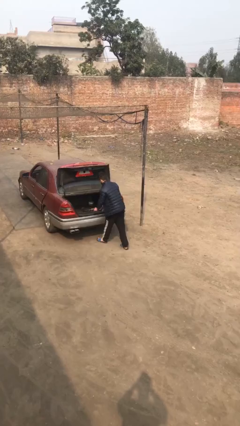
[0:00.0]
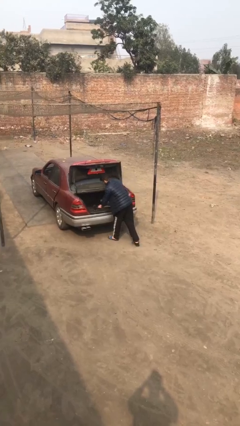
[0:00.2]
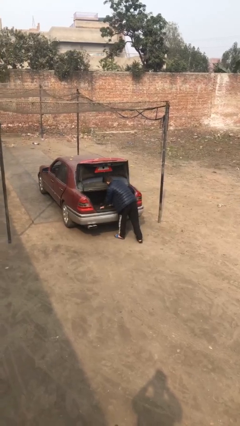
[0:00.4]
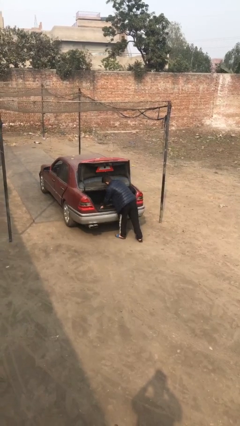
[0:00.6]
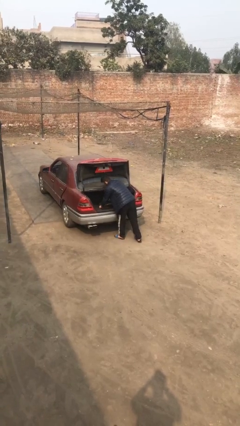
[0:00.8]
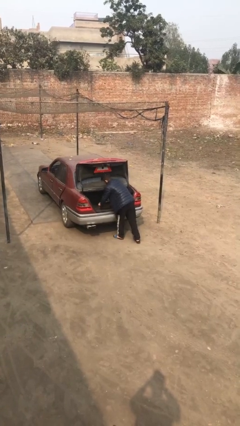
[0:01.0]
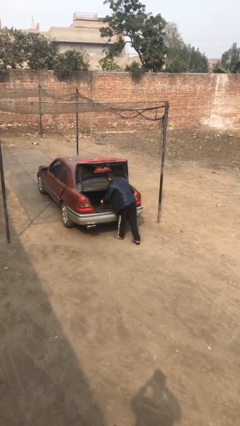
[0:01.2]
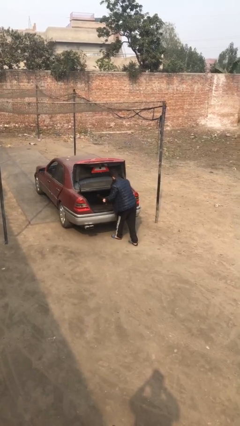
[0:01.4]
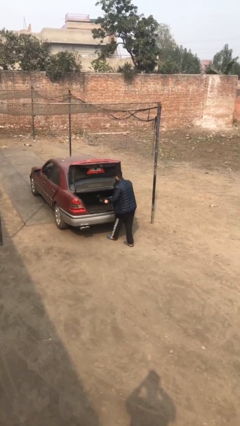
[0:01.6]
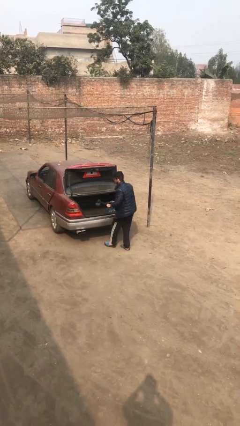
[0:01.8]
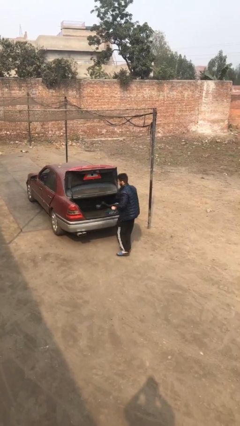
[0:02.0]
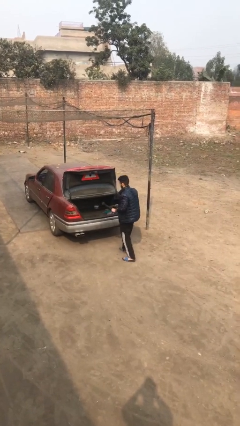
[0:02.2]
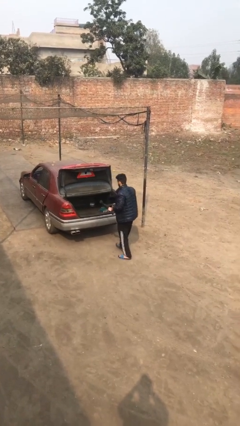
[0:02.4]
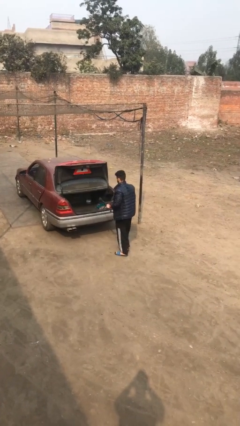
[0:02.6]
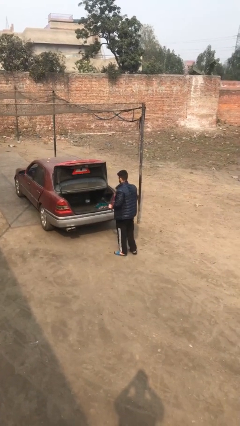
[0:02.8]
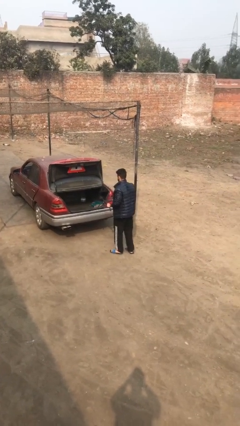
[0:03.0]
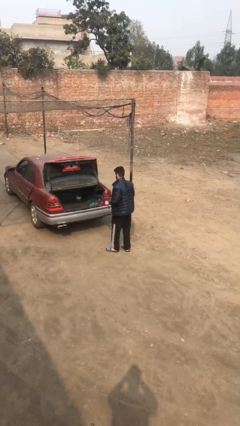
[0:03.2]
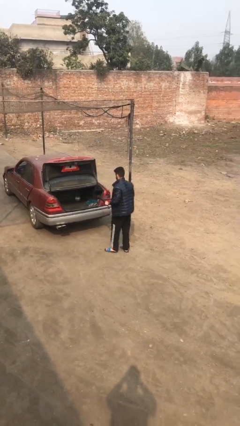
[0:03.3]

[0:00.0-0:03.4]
person unloads car

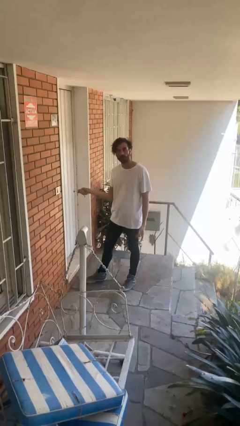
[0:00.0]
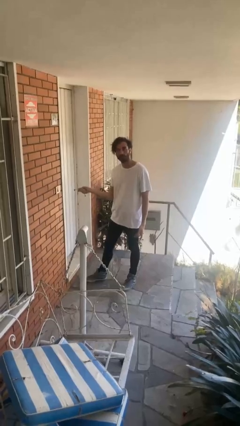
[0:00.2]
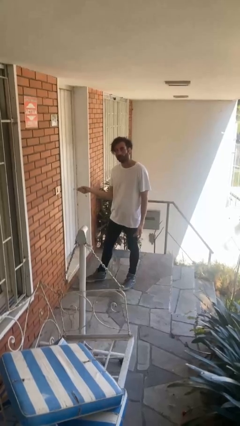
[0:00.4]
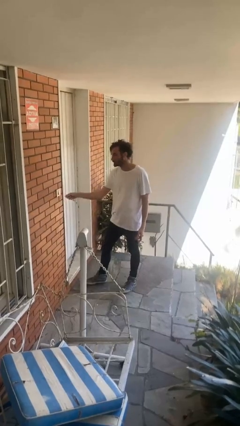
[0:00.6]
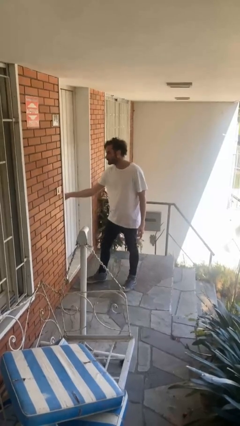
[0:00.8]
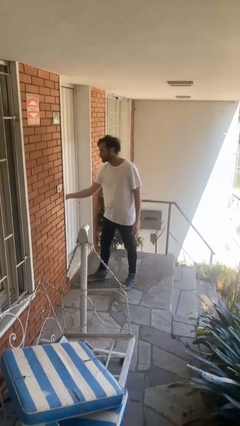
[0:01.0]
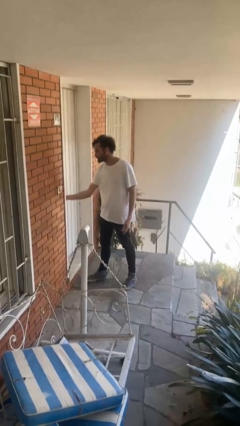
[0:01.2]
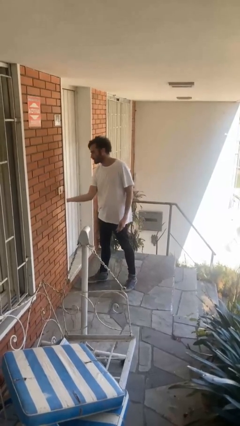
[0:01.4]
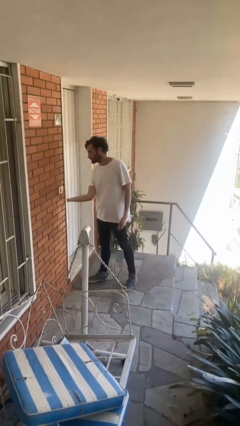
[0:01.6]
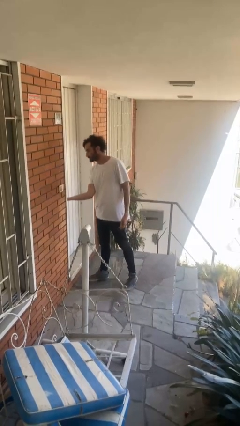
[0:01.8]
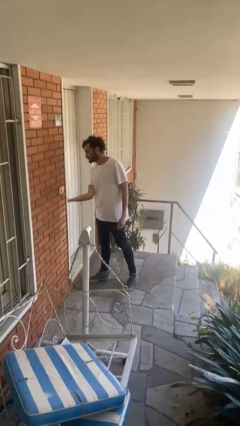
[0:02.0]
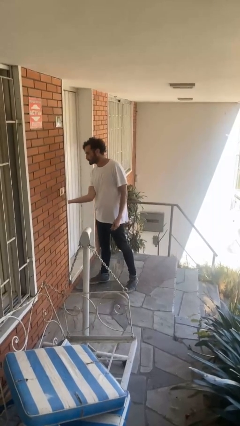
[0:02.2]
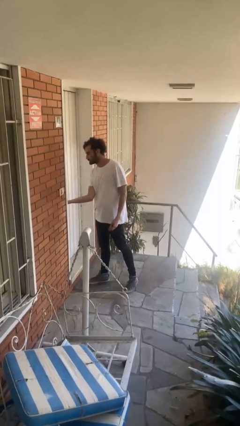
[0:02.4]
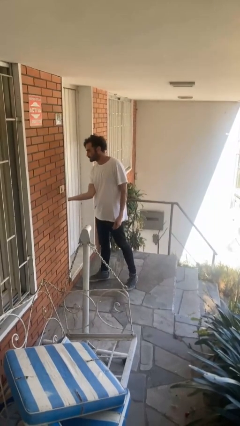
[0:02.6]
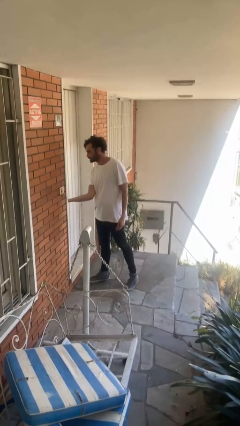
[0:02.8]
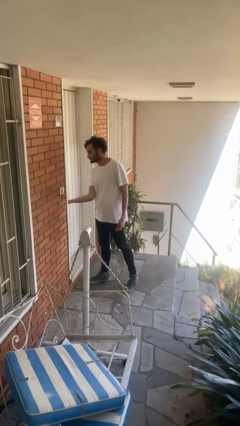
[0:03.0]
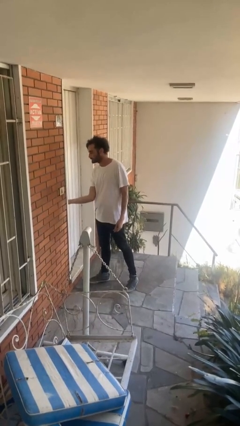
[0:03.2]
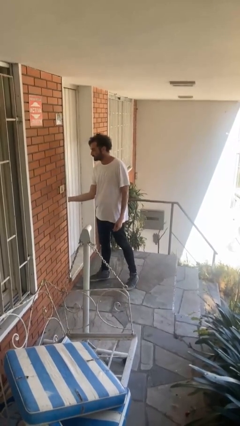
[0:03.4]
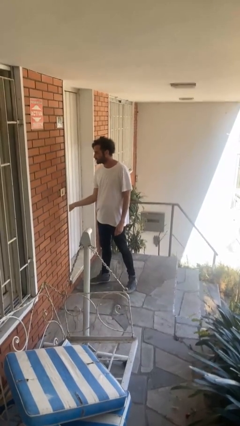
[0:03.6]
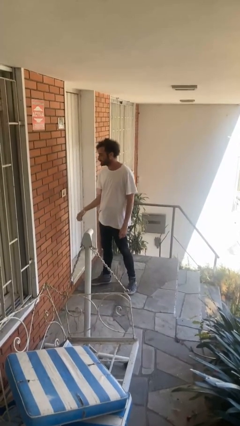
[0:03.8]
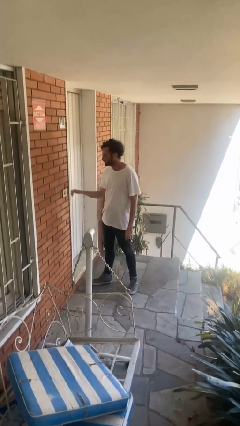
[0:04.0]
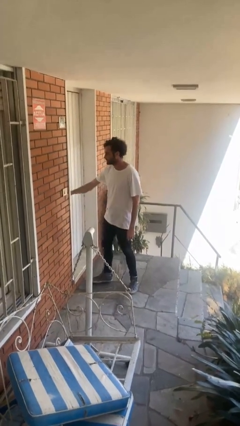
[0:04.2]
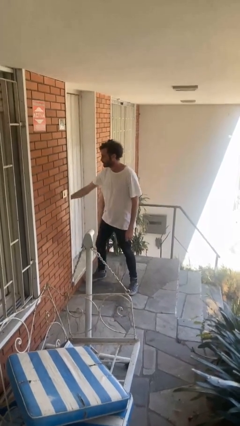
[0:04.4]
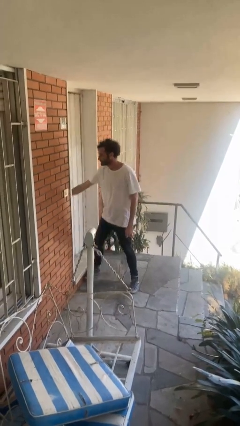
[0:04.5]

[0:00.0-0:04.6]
person unlocks door with keys

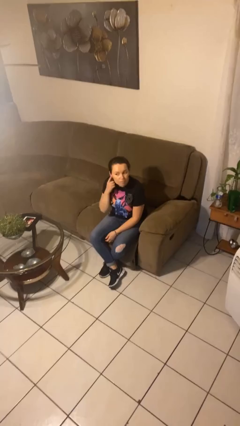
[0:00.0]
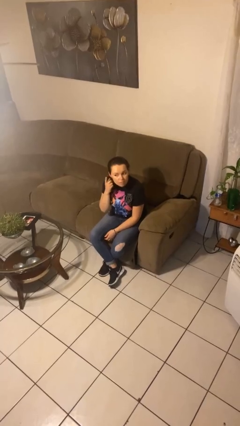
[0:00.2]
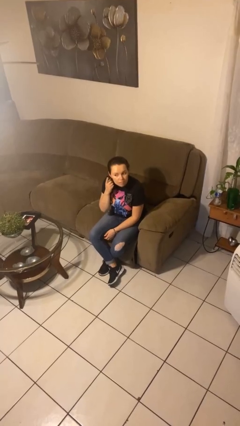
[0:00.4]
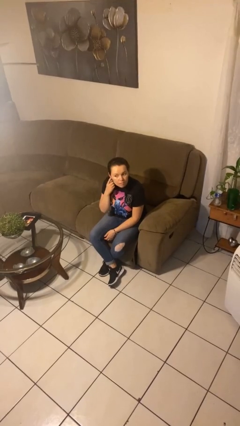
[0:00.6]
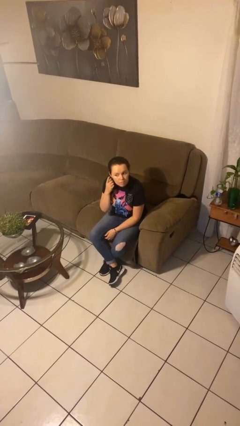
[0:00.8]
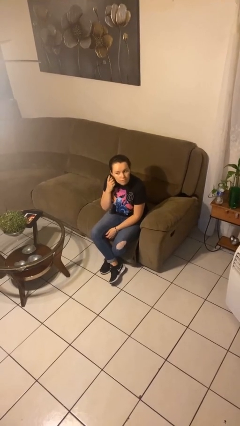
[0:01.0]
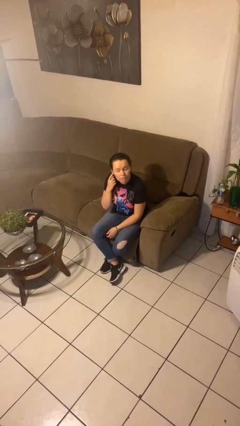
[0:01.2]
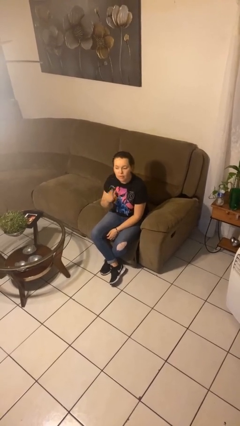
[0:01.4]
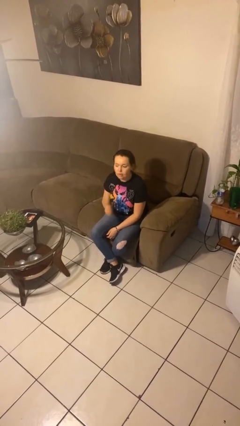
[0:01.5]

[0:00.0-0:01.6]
person gestures listen closely

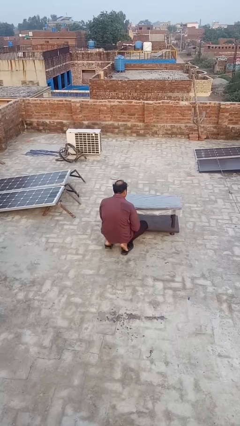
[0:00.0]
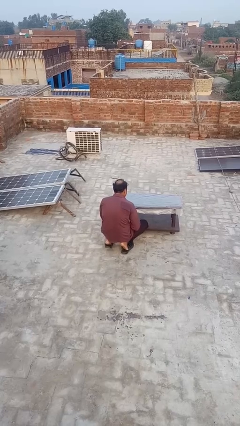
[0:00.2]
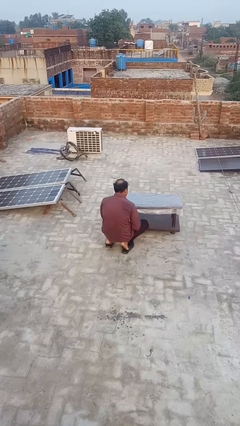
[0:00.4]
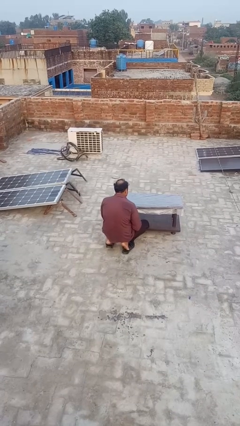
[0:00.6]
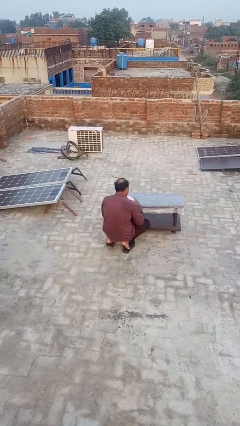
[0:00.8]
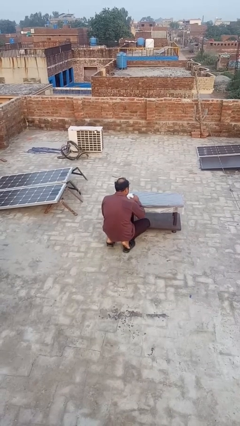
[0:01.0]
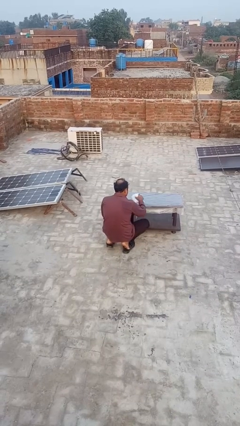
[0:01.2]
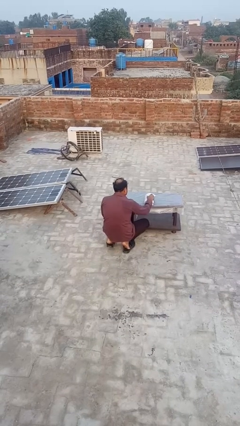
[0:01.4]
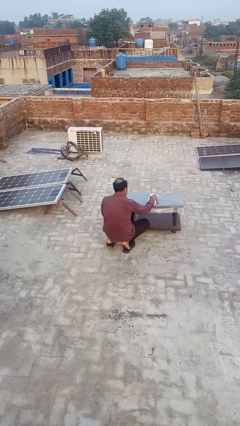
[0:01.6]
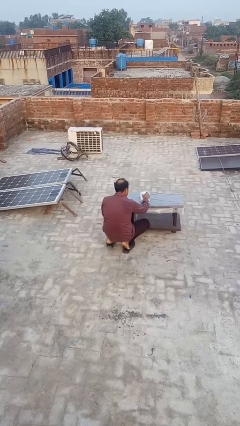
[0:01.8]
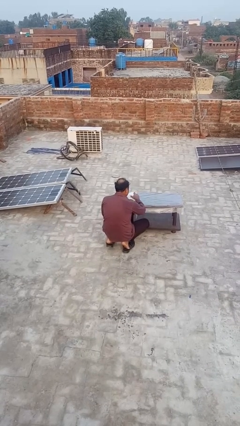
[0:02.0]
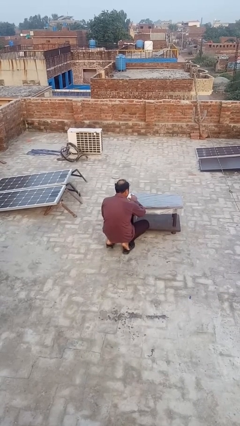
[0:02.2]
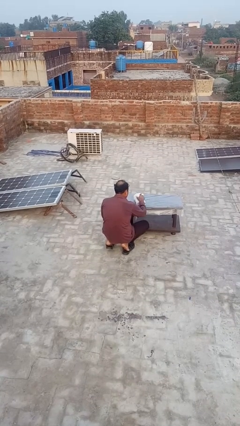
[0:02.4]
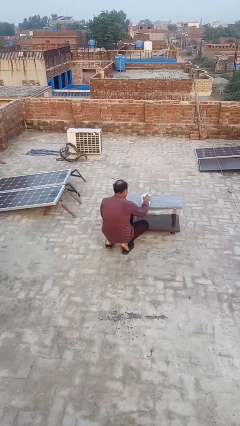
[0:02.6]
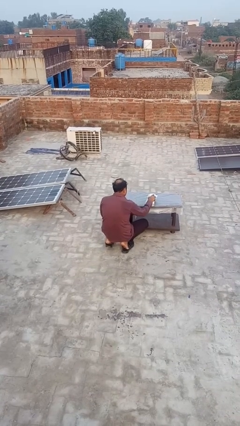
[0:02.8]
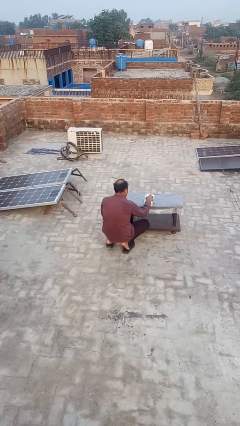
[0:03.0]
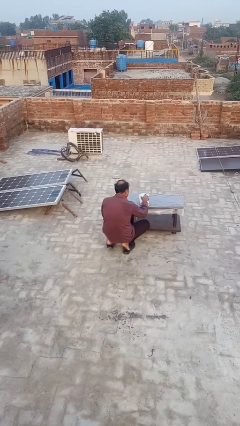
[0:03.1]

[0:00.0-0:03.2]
person cleans table with rag

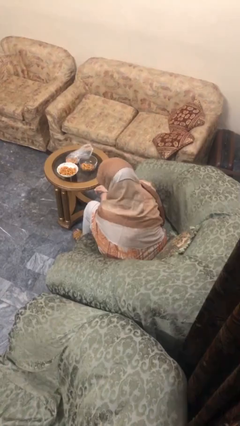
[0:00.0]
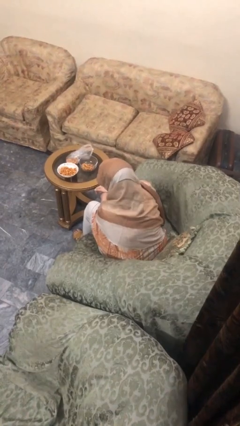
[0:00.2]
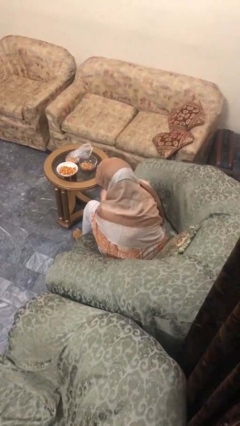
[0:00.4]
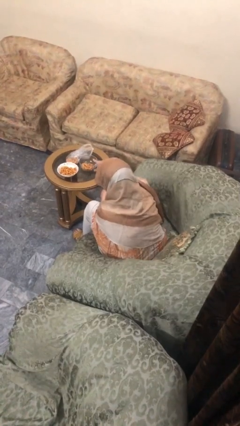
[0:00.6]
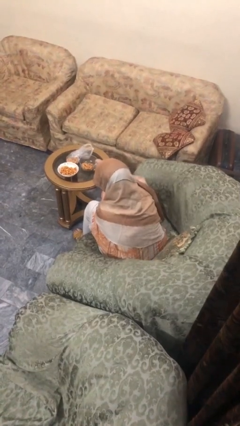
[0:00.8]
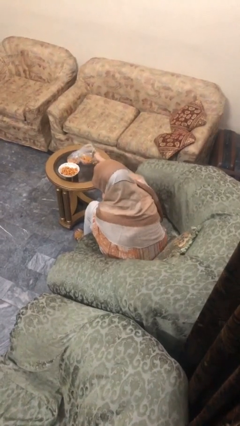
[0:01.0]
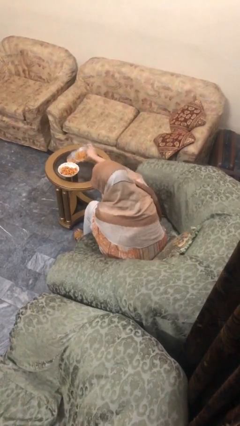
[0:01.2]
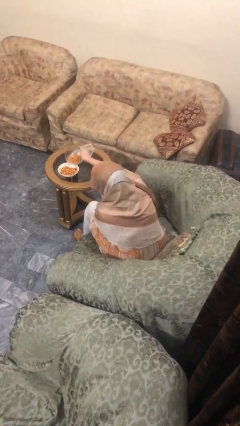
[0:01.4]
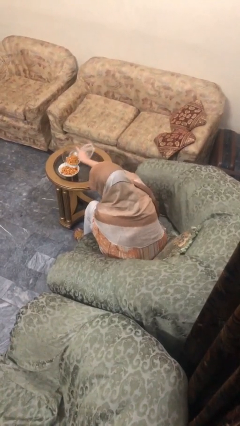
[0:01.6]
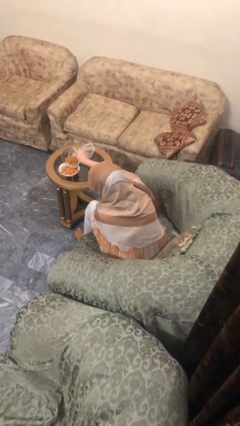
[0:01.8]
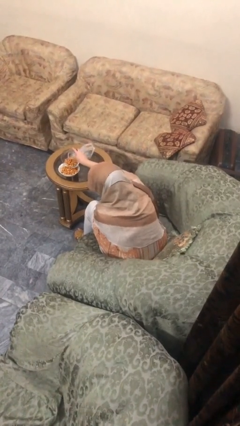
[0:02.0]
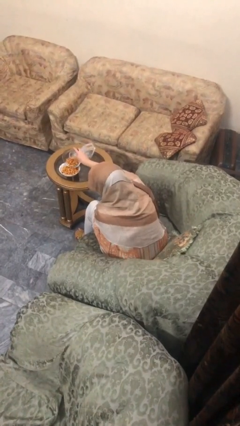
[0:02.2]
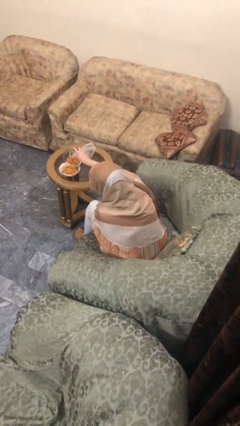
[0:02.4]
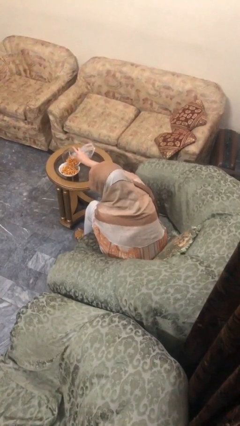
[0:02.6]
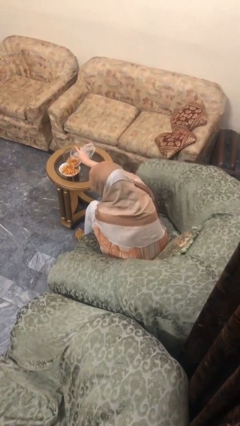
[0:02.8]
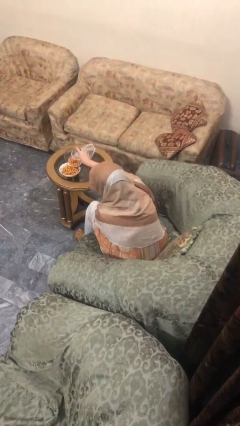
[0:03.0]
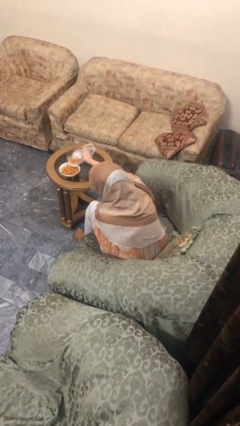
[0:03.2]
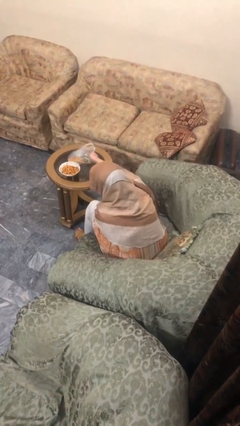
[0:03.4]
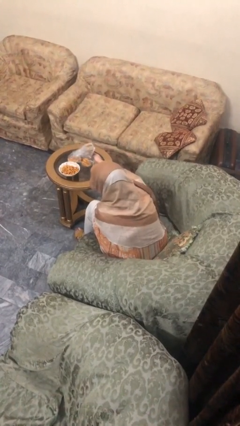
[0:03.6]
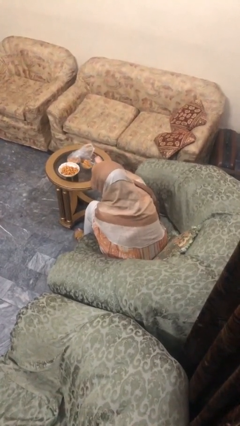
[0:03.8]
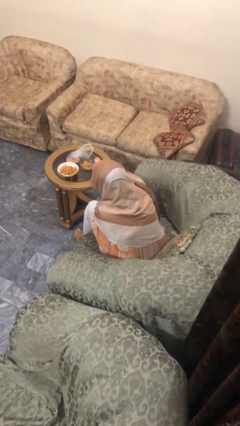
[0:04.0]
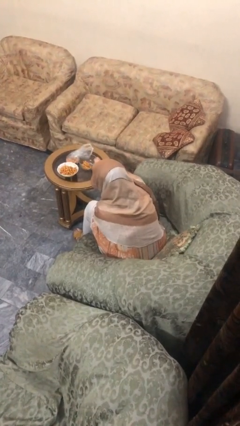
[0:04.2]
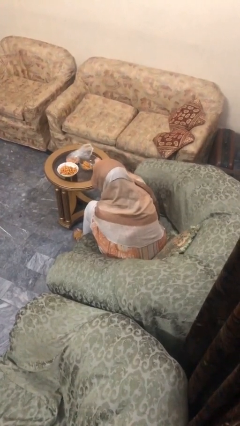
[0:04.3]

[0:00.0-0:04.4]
person pours into bowl
